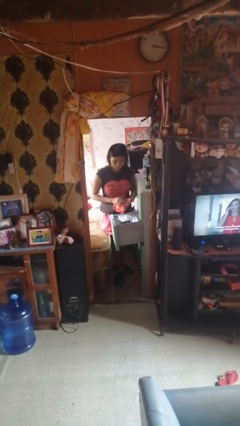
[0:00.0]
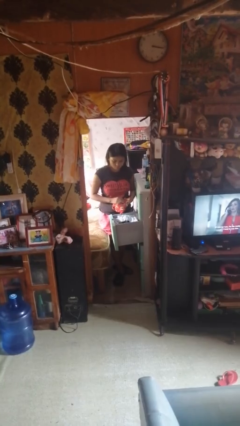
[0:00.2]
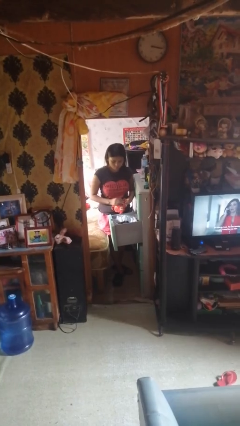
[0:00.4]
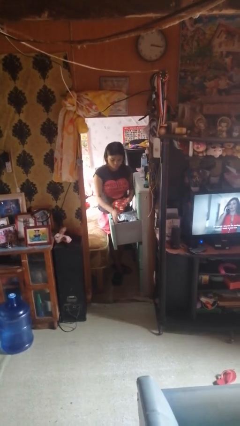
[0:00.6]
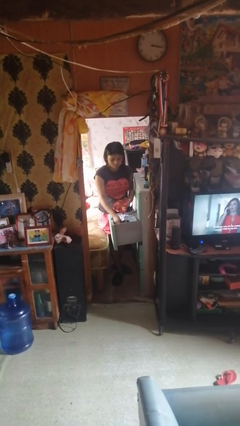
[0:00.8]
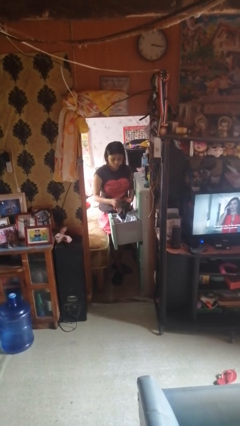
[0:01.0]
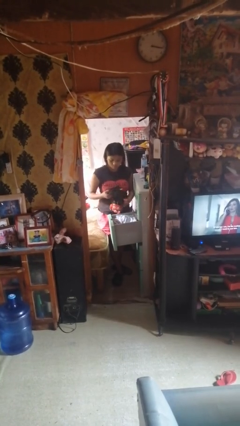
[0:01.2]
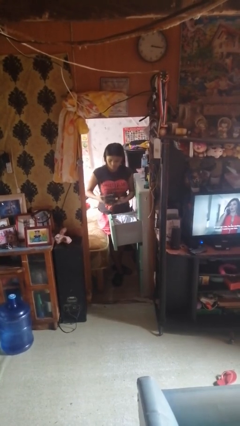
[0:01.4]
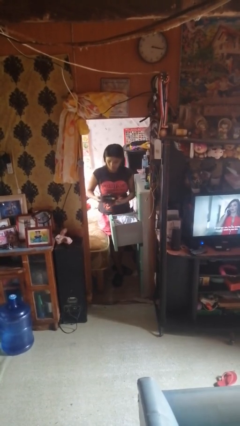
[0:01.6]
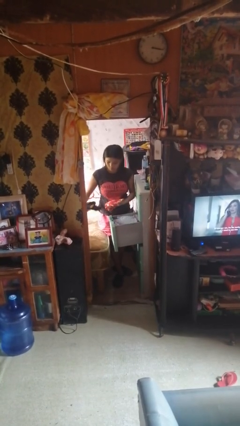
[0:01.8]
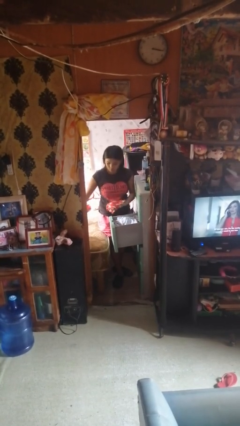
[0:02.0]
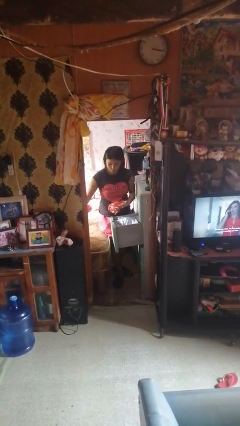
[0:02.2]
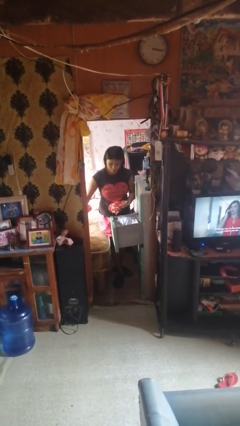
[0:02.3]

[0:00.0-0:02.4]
person takes clothes from dresser

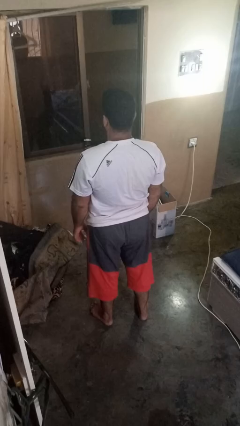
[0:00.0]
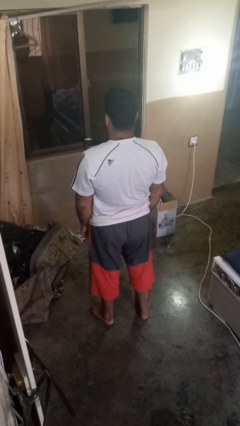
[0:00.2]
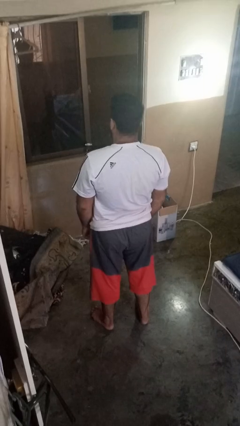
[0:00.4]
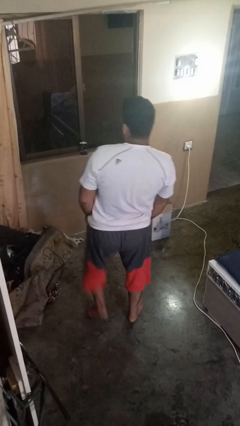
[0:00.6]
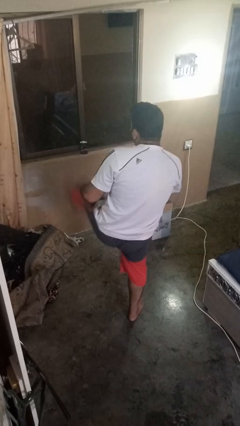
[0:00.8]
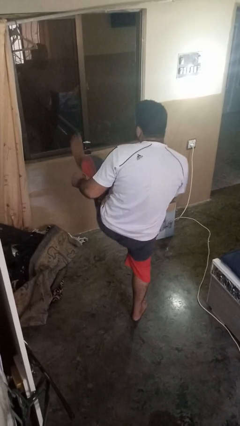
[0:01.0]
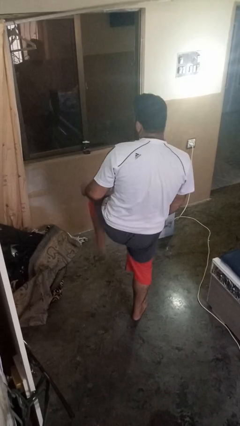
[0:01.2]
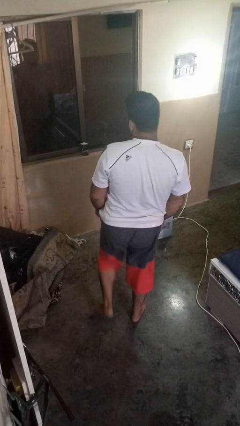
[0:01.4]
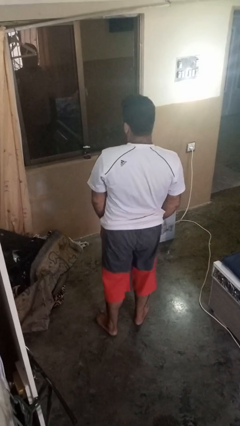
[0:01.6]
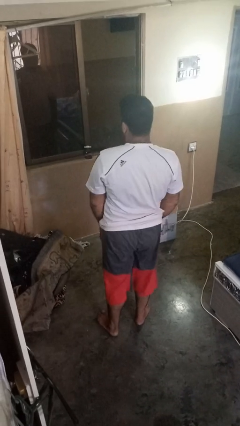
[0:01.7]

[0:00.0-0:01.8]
person karate kicks

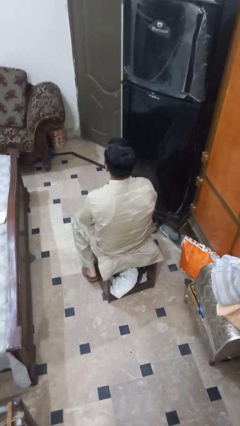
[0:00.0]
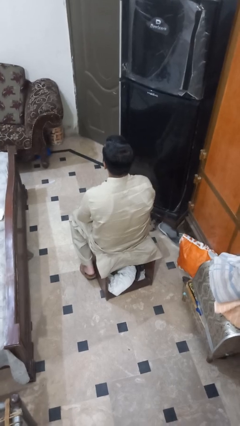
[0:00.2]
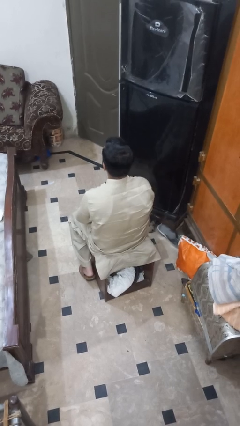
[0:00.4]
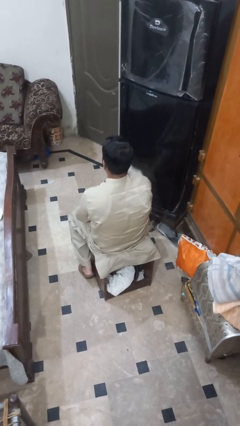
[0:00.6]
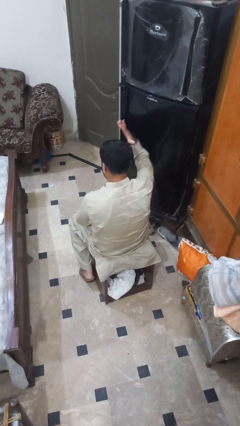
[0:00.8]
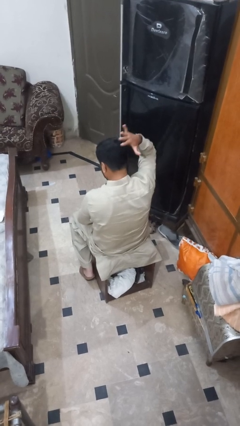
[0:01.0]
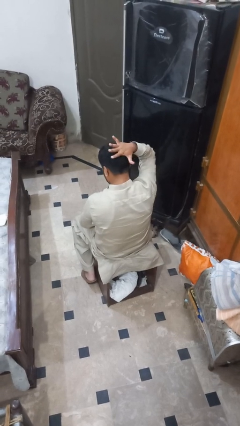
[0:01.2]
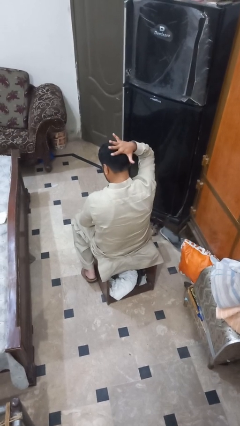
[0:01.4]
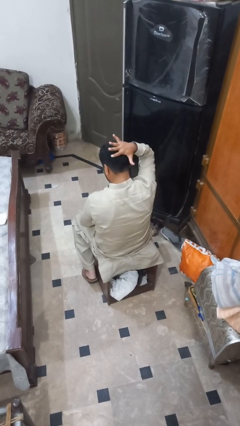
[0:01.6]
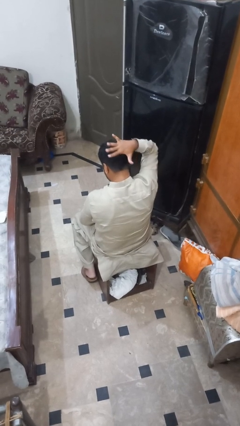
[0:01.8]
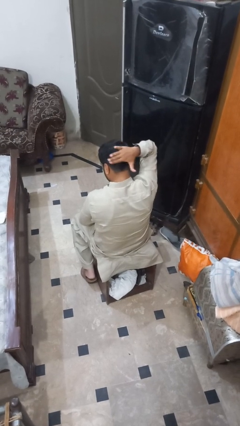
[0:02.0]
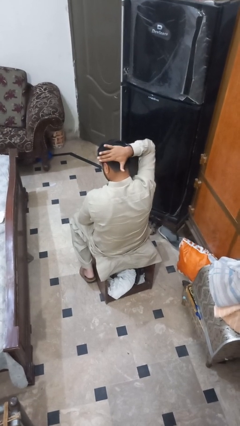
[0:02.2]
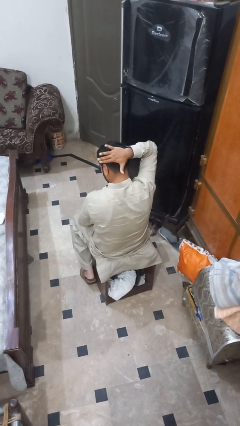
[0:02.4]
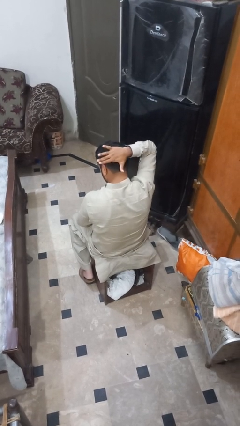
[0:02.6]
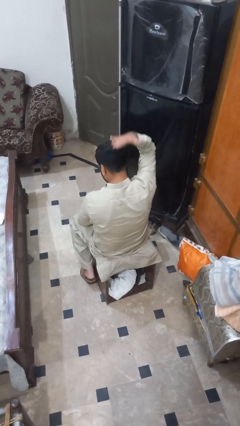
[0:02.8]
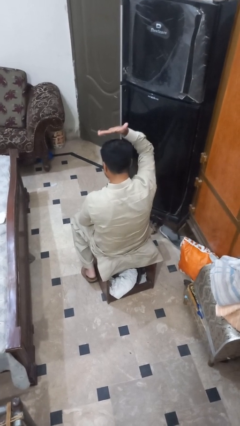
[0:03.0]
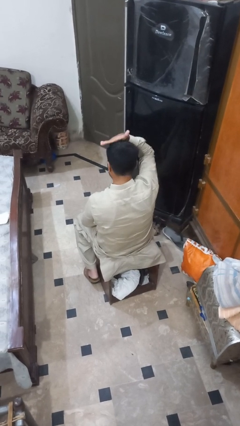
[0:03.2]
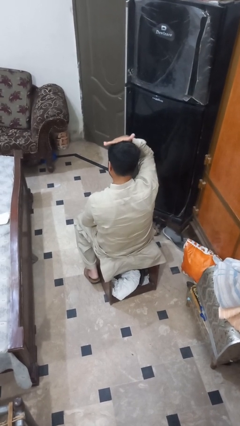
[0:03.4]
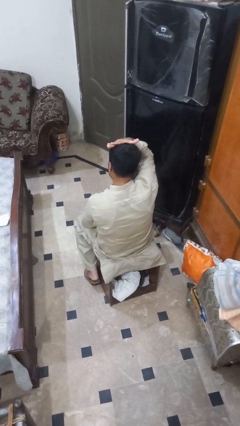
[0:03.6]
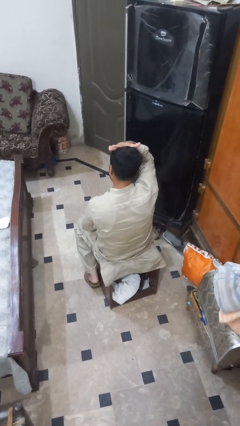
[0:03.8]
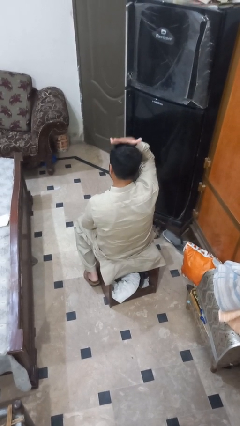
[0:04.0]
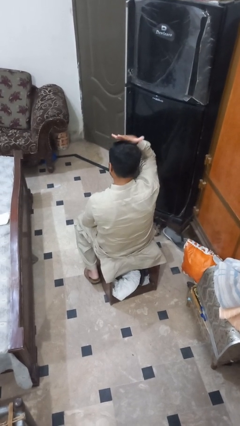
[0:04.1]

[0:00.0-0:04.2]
person pats head

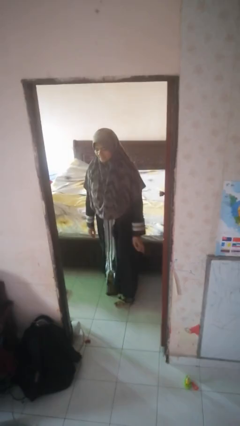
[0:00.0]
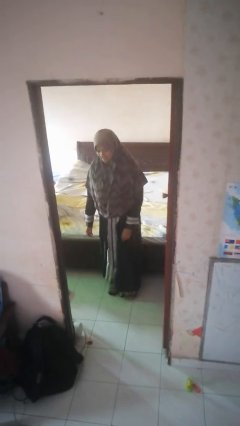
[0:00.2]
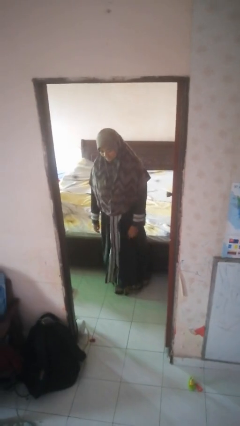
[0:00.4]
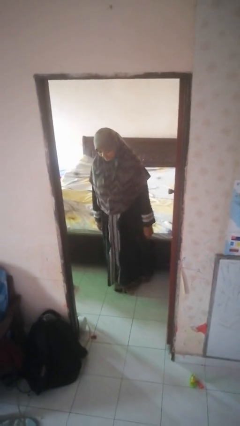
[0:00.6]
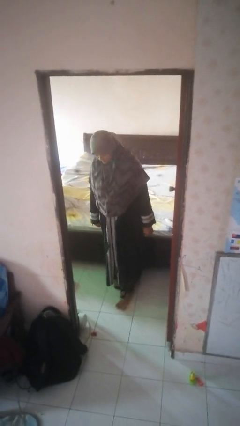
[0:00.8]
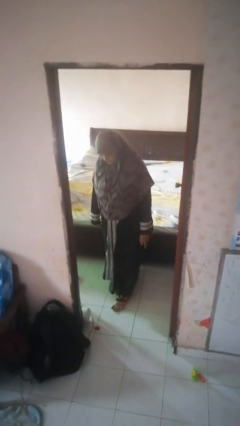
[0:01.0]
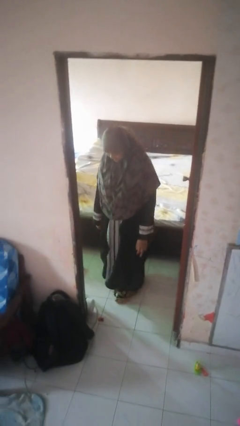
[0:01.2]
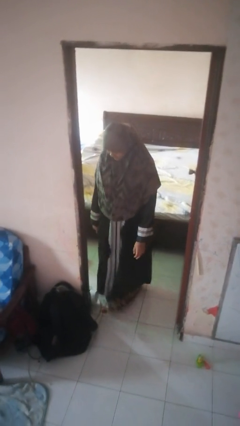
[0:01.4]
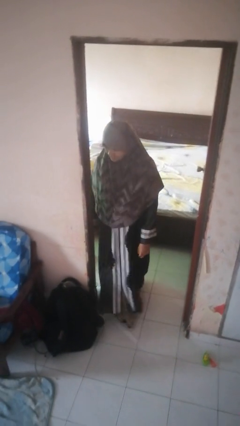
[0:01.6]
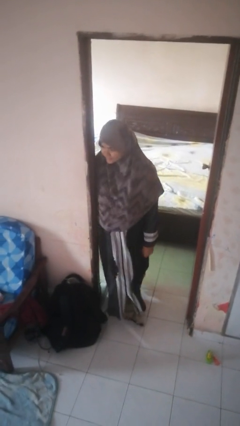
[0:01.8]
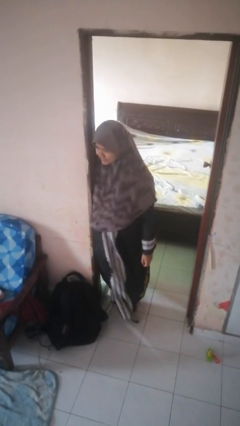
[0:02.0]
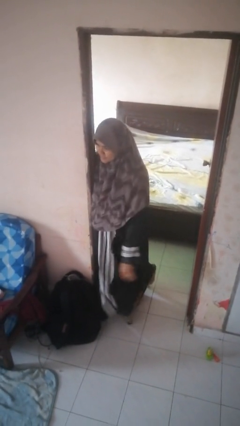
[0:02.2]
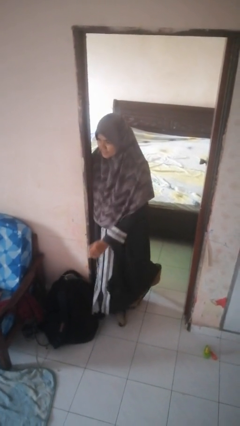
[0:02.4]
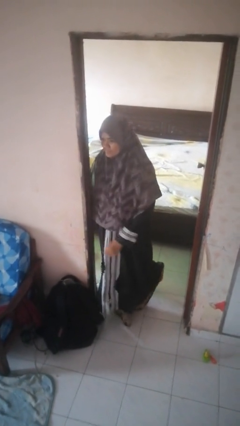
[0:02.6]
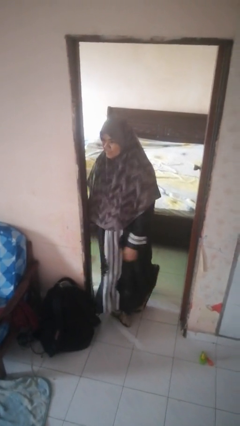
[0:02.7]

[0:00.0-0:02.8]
person bumps into wall

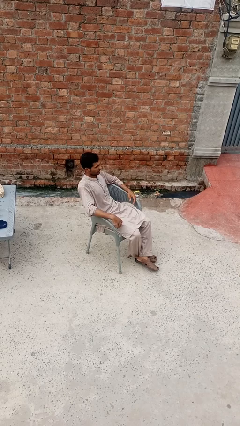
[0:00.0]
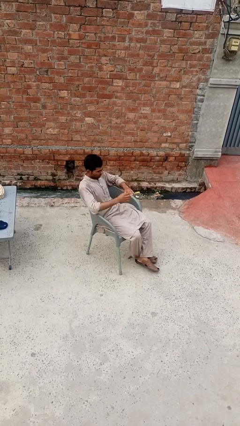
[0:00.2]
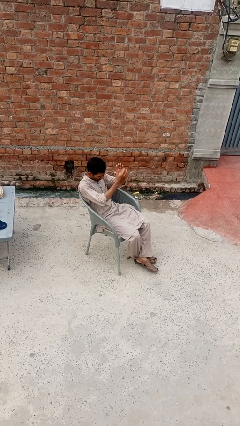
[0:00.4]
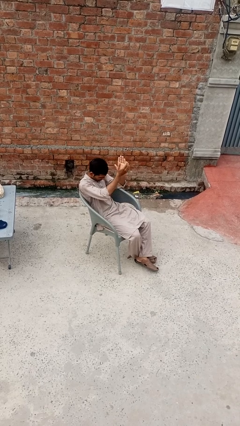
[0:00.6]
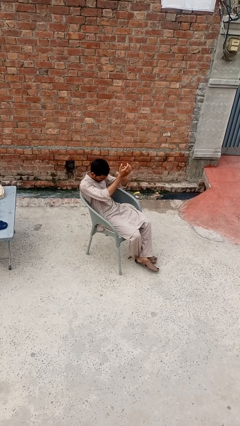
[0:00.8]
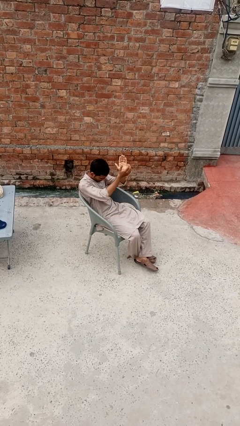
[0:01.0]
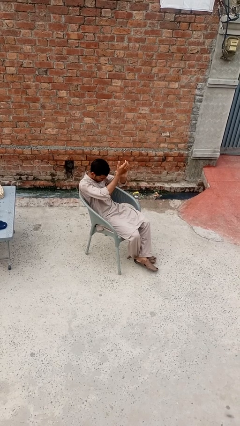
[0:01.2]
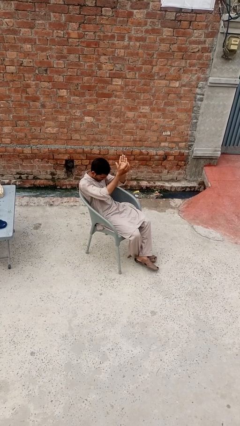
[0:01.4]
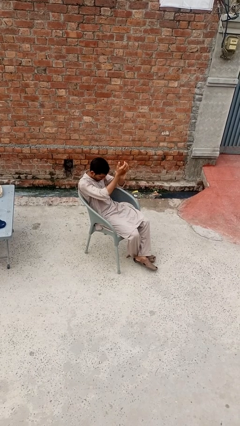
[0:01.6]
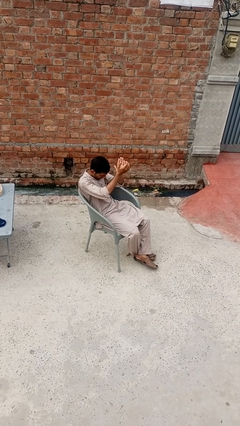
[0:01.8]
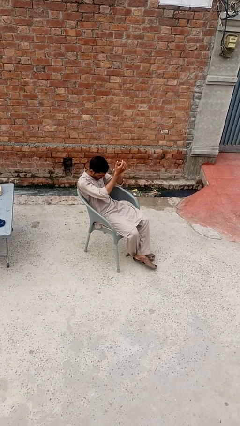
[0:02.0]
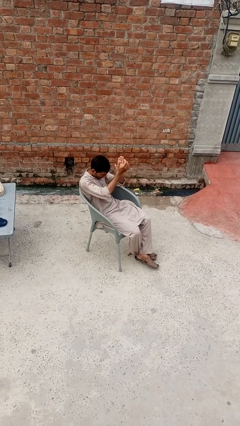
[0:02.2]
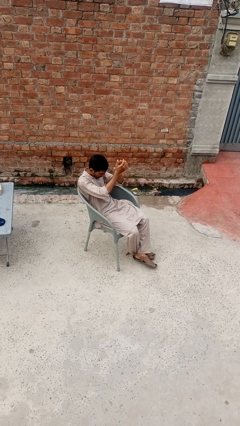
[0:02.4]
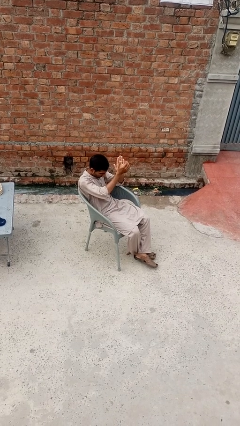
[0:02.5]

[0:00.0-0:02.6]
person claps hands

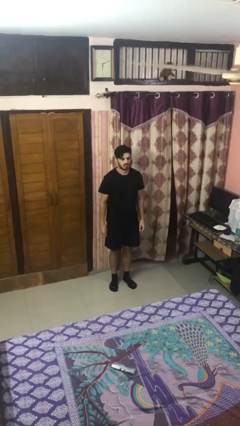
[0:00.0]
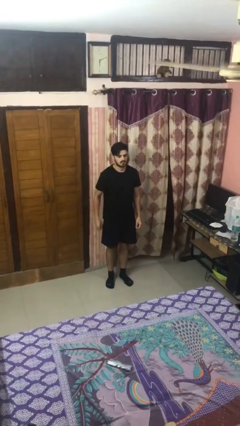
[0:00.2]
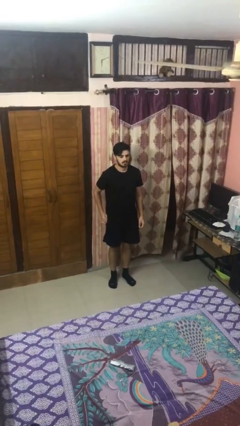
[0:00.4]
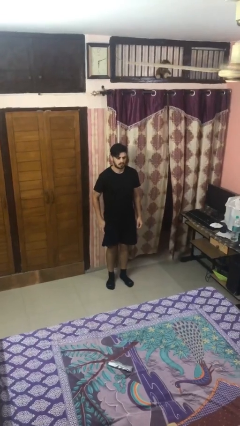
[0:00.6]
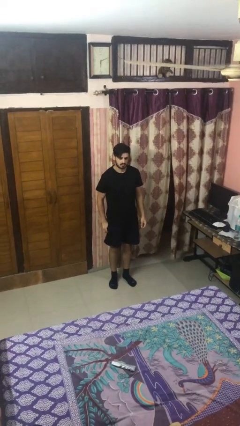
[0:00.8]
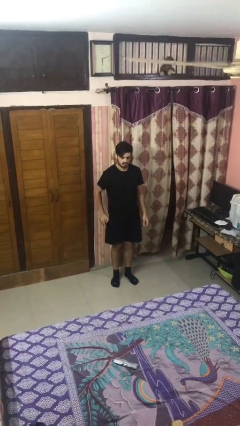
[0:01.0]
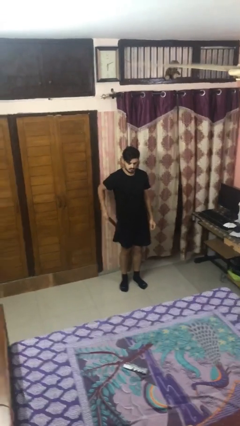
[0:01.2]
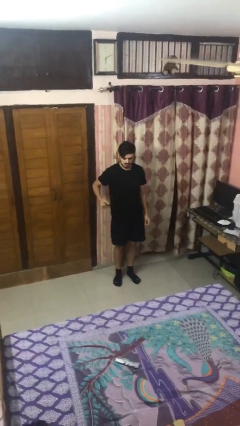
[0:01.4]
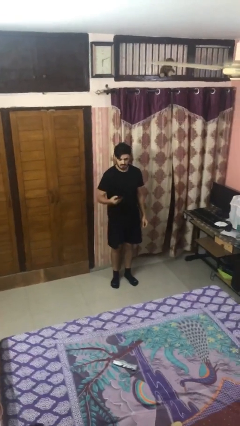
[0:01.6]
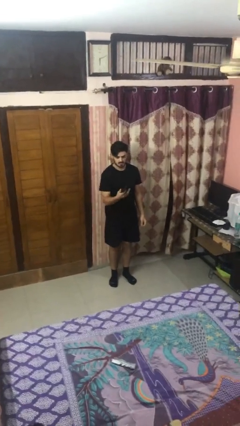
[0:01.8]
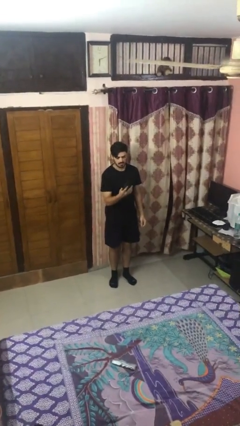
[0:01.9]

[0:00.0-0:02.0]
person takes phone from pocket

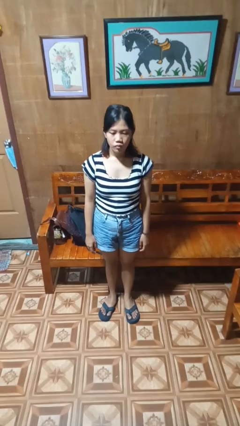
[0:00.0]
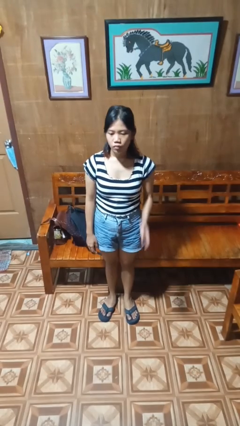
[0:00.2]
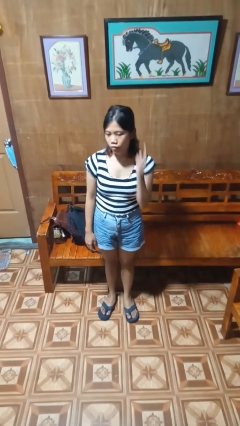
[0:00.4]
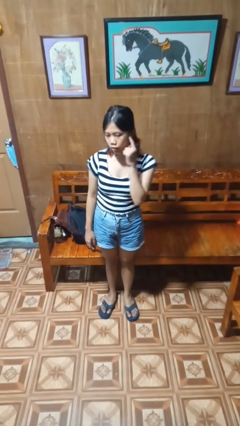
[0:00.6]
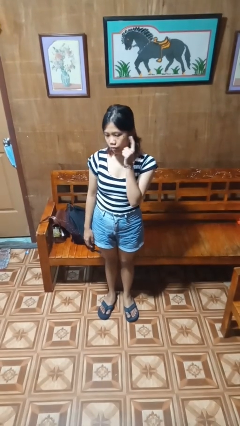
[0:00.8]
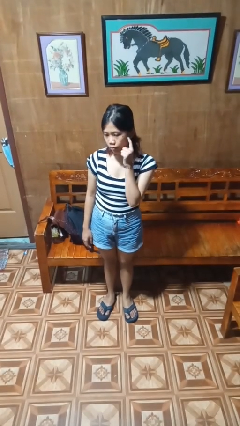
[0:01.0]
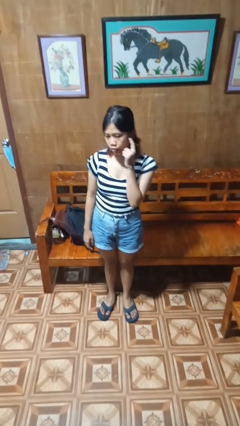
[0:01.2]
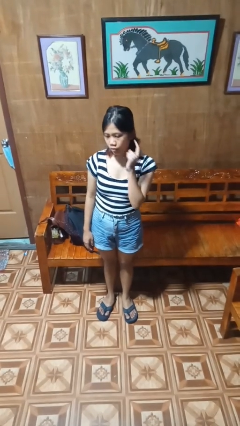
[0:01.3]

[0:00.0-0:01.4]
person gestures listen closely
